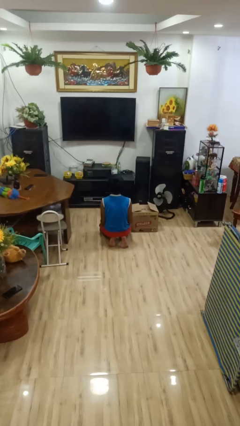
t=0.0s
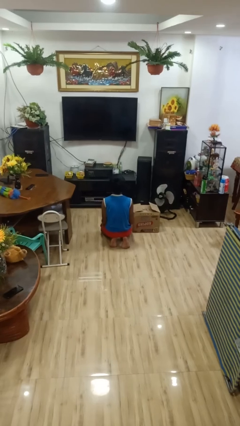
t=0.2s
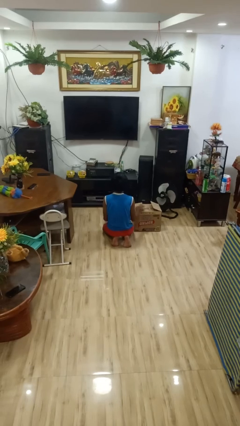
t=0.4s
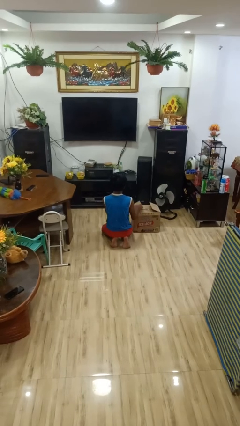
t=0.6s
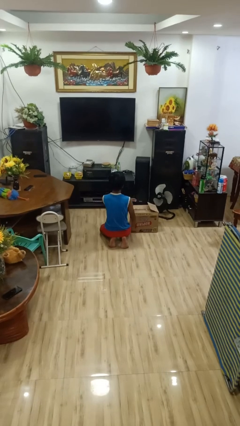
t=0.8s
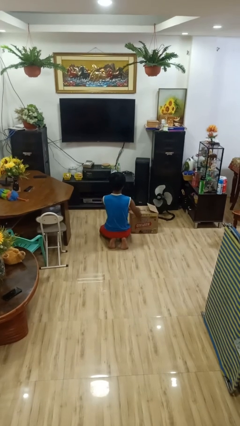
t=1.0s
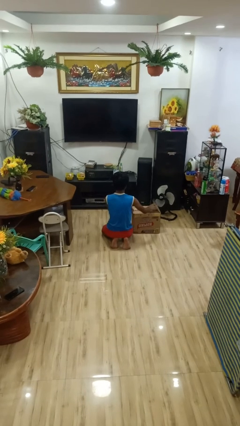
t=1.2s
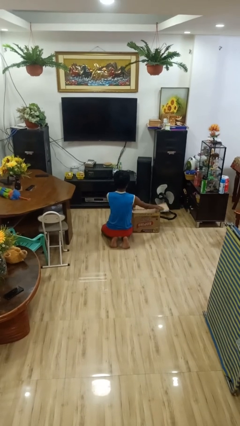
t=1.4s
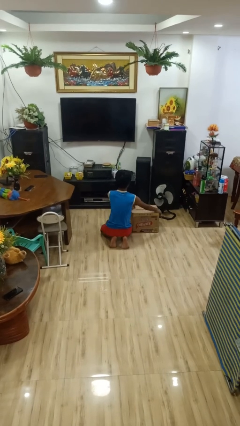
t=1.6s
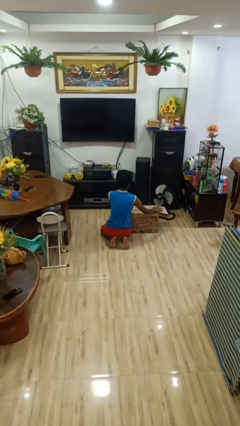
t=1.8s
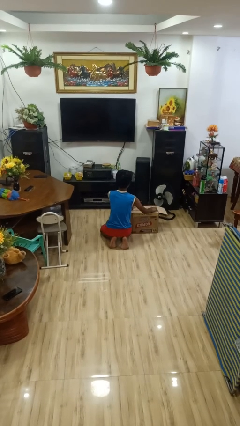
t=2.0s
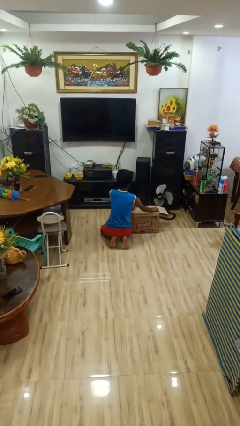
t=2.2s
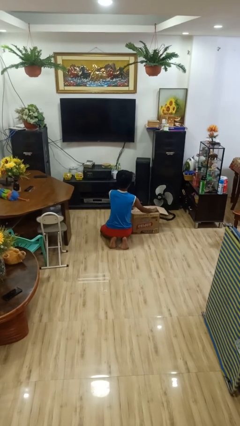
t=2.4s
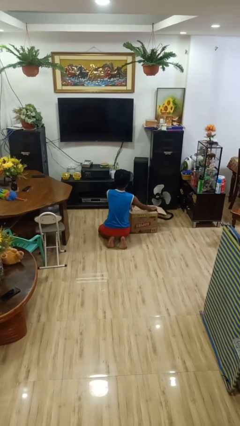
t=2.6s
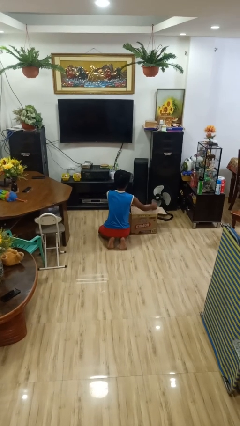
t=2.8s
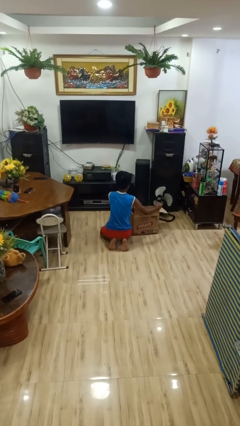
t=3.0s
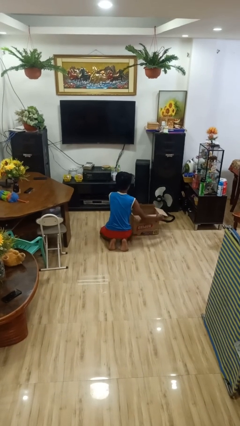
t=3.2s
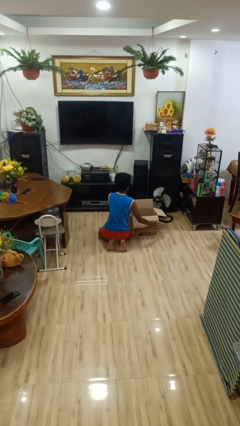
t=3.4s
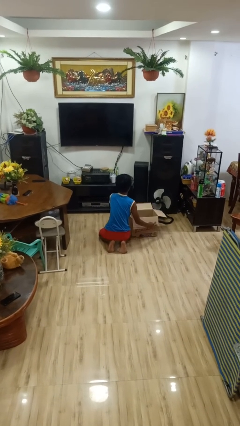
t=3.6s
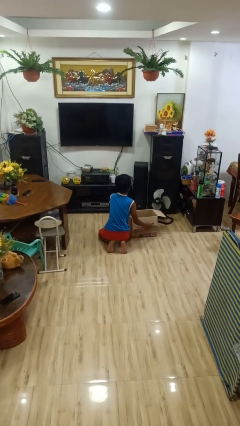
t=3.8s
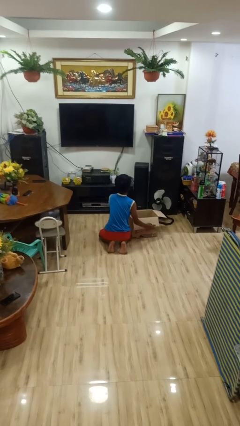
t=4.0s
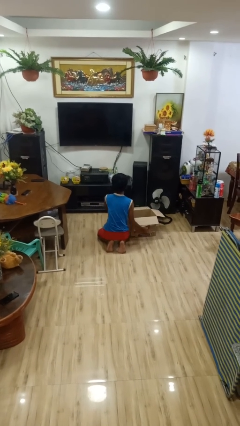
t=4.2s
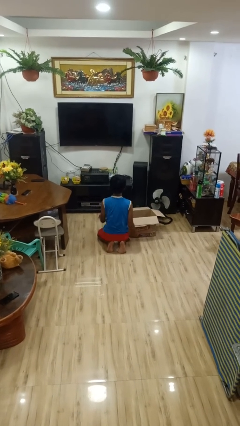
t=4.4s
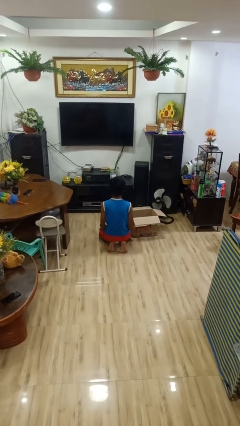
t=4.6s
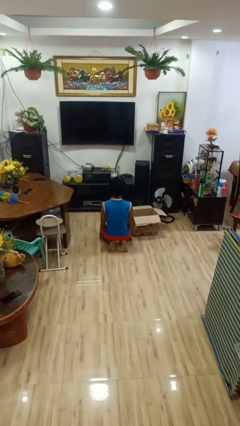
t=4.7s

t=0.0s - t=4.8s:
person opens box

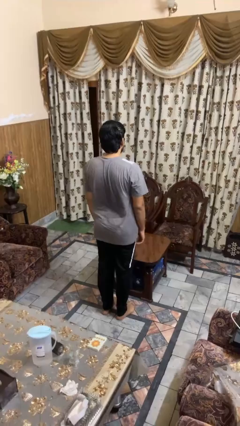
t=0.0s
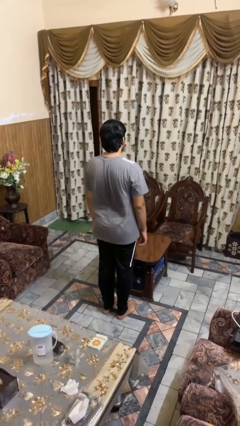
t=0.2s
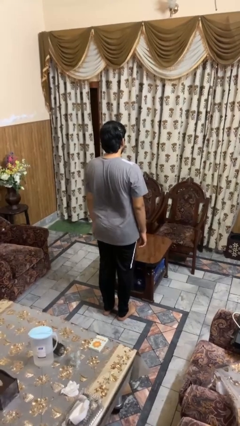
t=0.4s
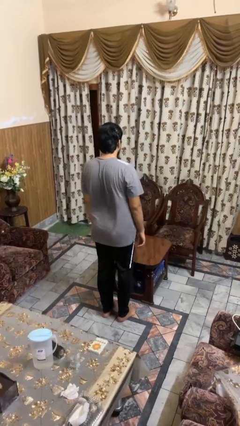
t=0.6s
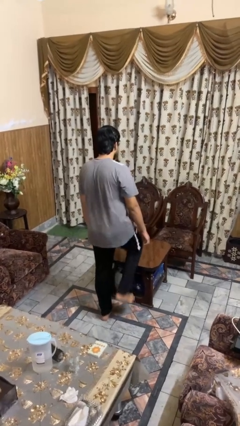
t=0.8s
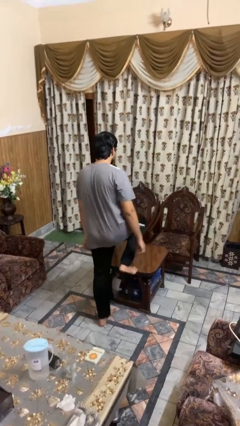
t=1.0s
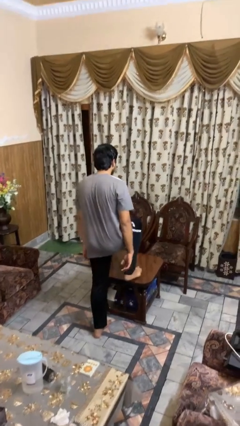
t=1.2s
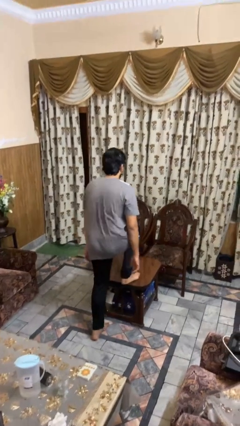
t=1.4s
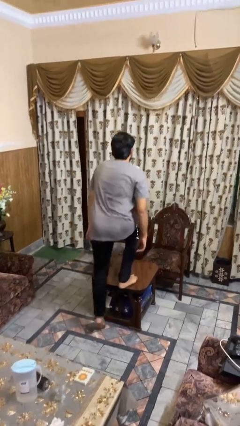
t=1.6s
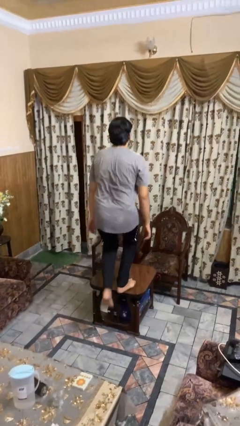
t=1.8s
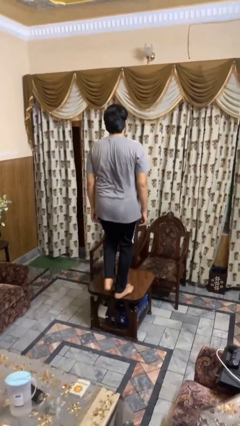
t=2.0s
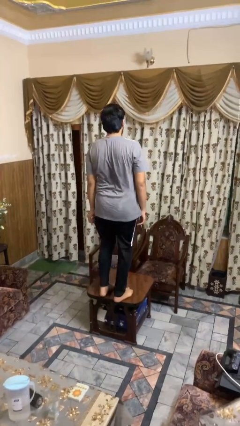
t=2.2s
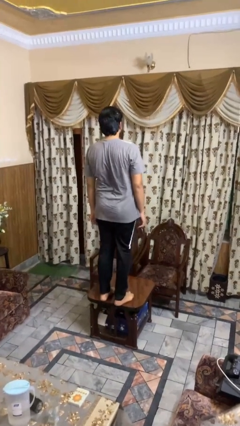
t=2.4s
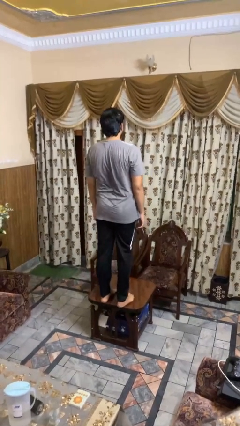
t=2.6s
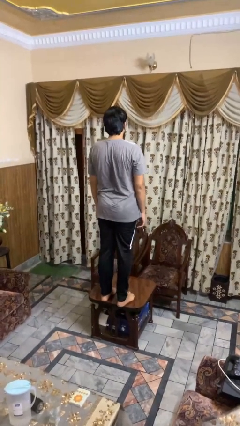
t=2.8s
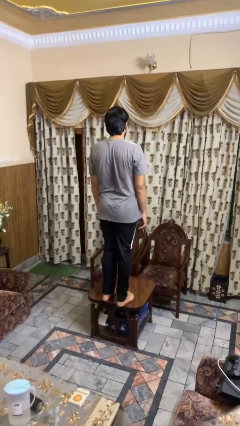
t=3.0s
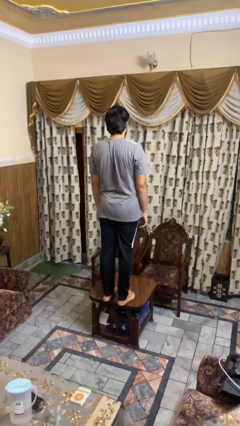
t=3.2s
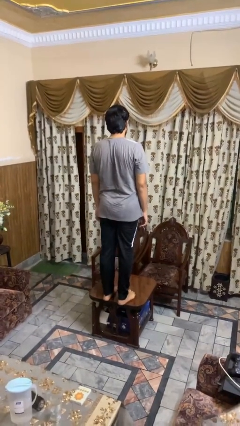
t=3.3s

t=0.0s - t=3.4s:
person climbs on table

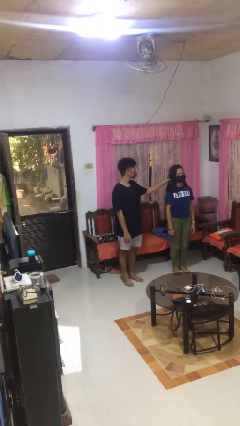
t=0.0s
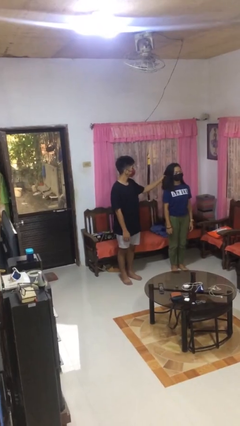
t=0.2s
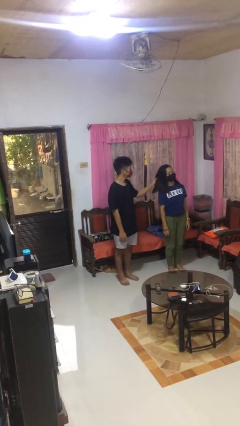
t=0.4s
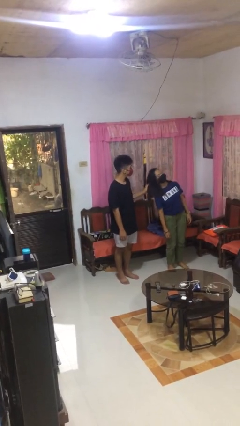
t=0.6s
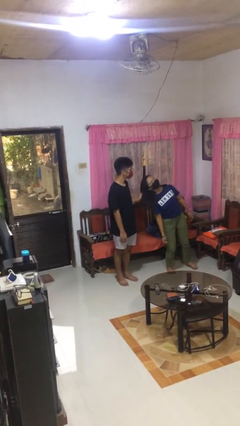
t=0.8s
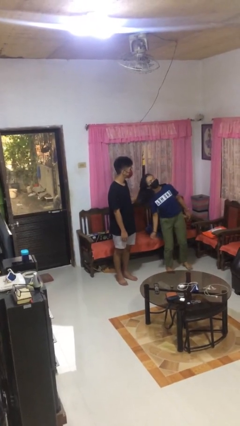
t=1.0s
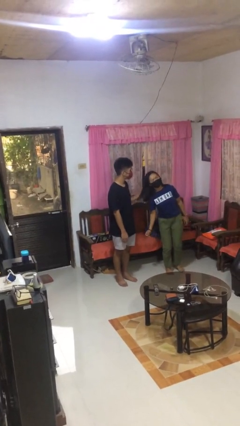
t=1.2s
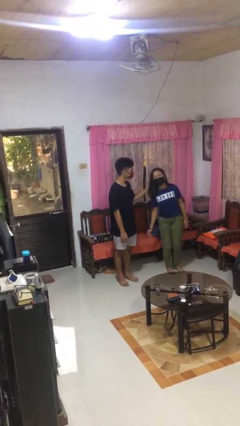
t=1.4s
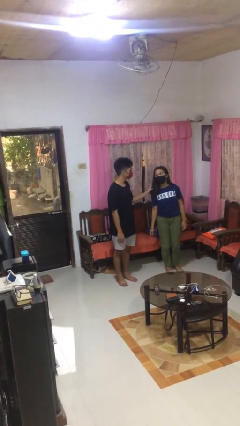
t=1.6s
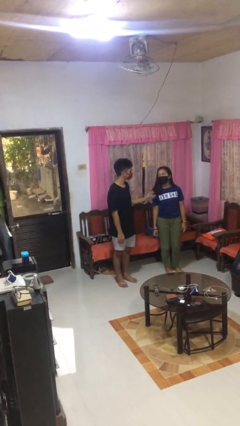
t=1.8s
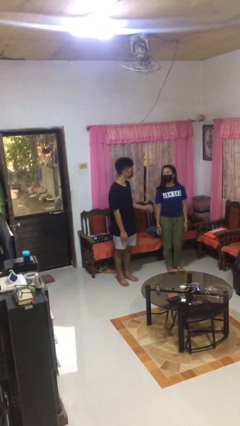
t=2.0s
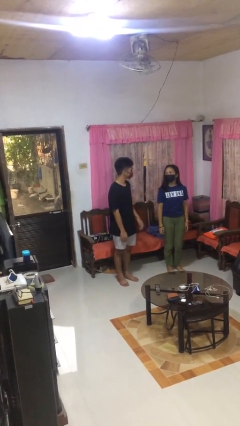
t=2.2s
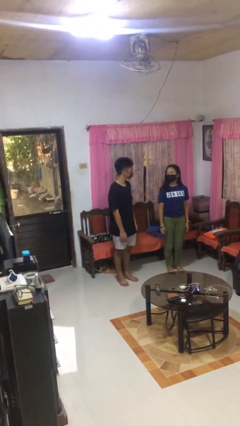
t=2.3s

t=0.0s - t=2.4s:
person grabs person by hair

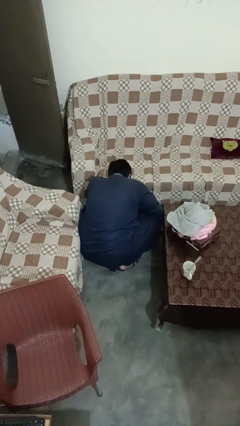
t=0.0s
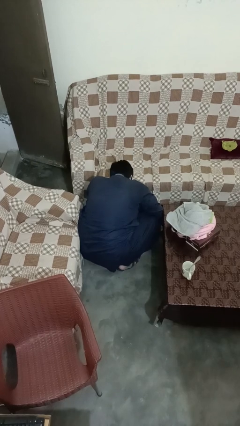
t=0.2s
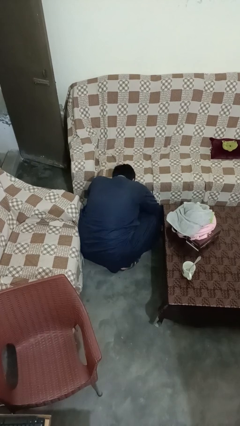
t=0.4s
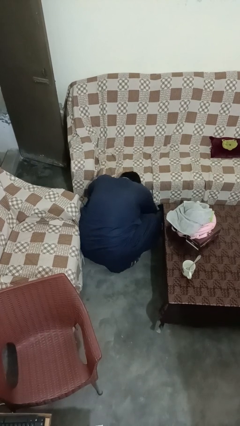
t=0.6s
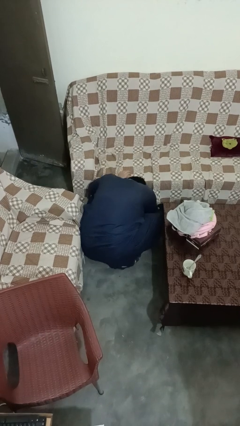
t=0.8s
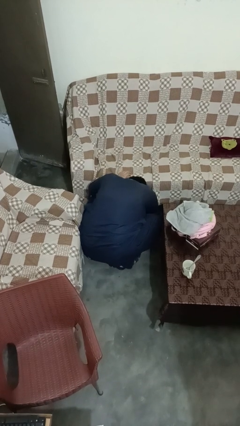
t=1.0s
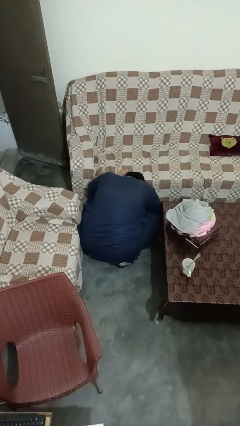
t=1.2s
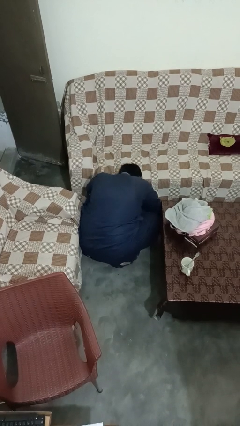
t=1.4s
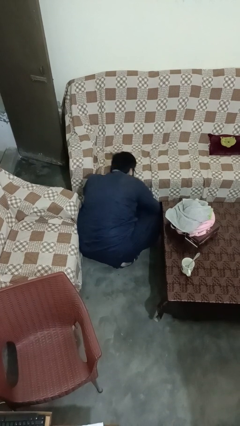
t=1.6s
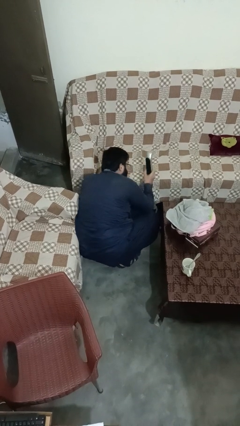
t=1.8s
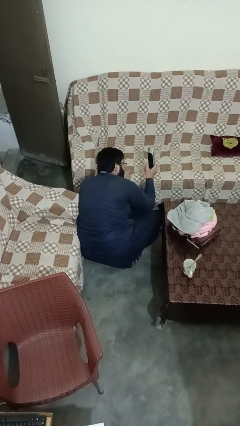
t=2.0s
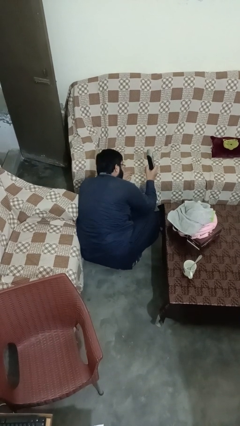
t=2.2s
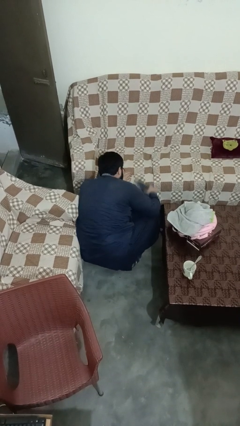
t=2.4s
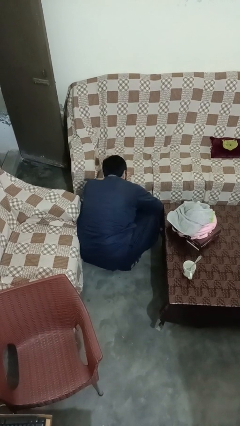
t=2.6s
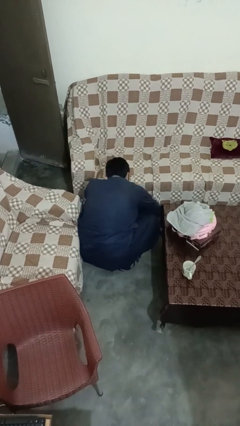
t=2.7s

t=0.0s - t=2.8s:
person searches under couch

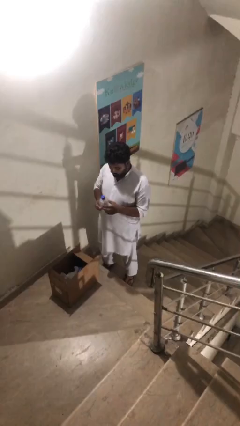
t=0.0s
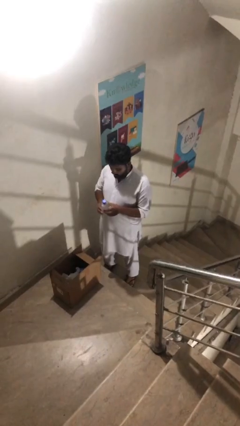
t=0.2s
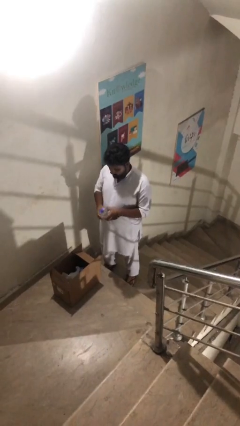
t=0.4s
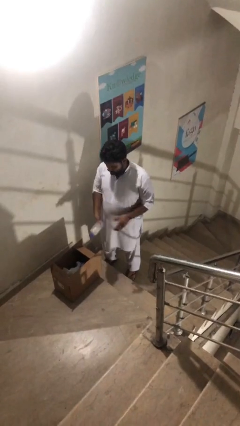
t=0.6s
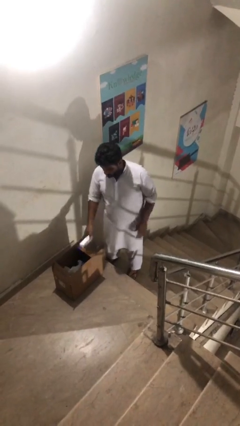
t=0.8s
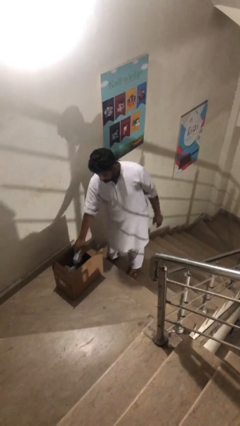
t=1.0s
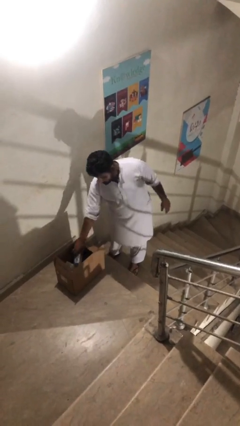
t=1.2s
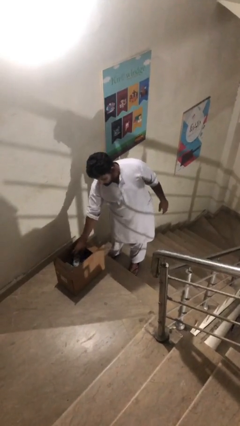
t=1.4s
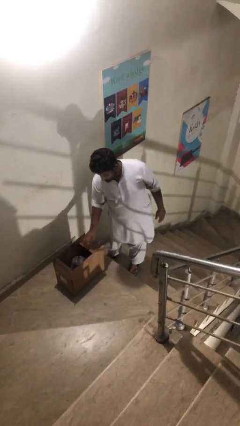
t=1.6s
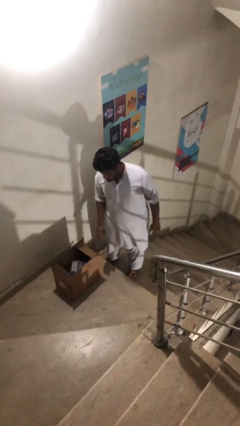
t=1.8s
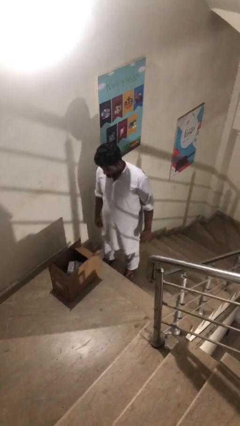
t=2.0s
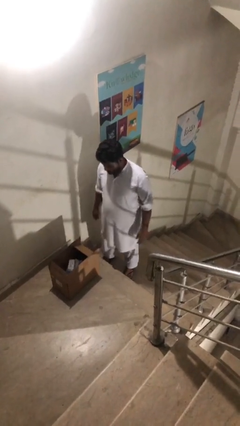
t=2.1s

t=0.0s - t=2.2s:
person puts object into box

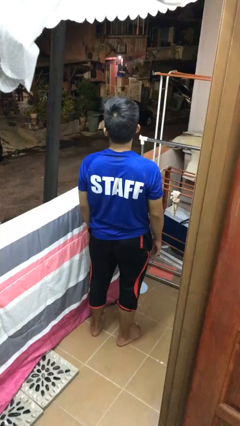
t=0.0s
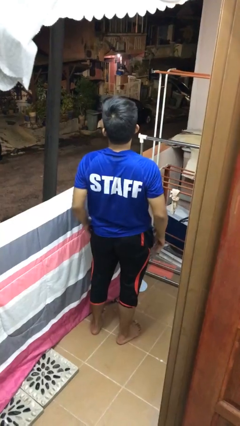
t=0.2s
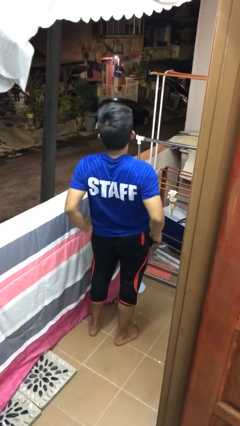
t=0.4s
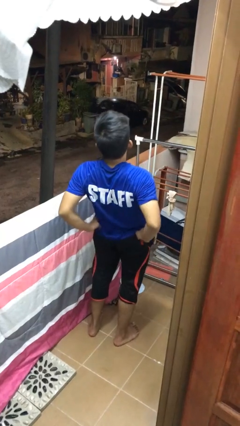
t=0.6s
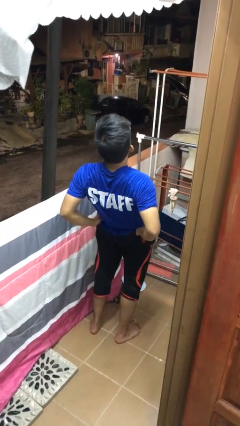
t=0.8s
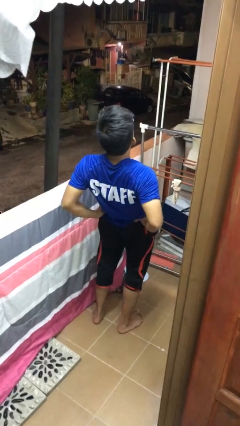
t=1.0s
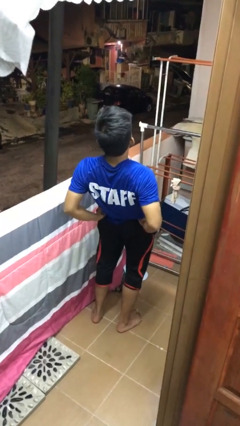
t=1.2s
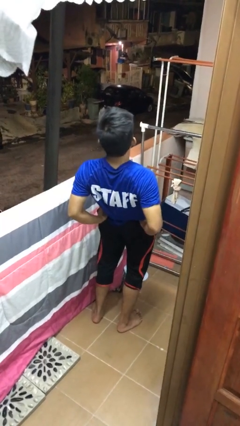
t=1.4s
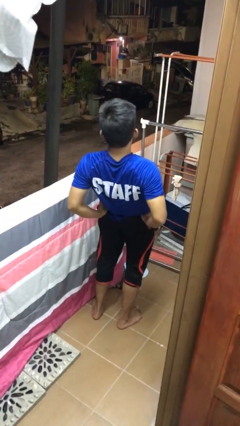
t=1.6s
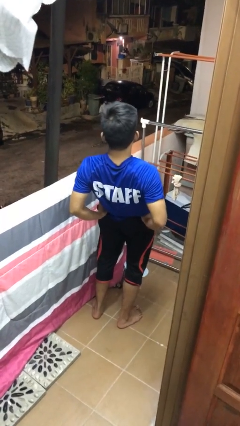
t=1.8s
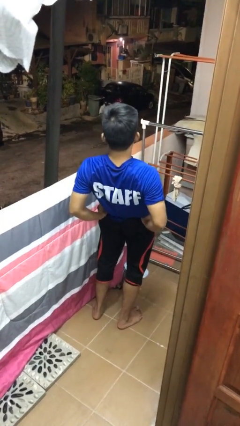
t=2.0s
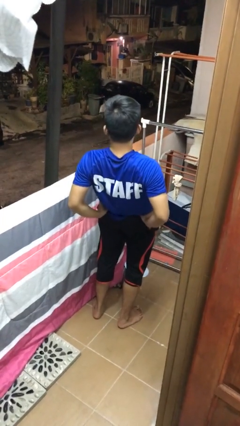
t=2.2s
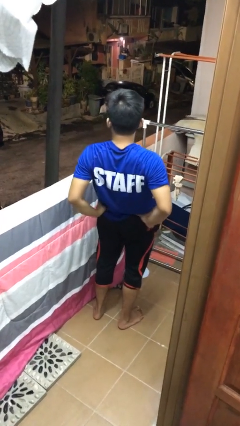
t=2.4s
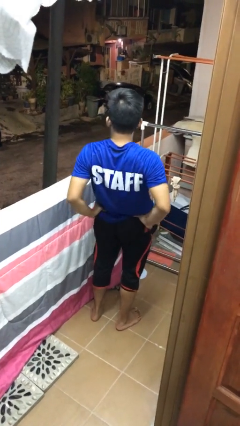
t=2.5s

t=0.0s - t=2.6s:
person stretches back
